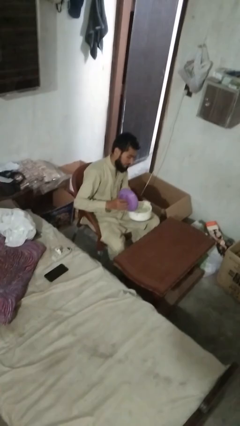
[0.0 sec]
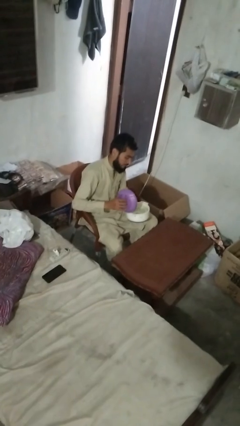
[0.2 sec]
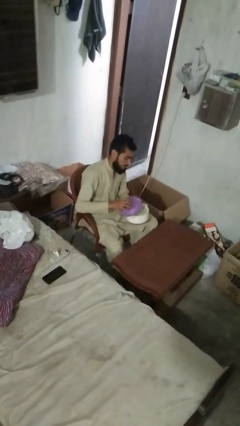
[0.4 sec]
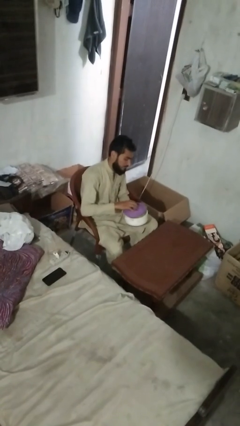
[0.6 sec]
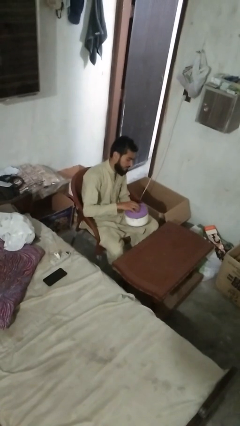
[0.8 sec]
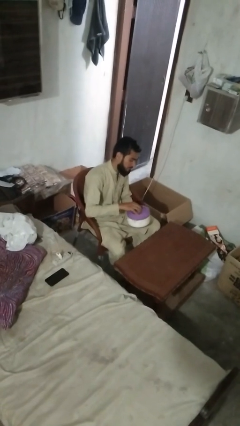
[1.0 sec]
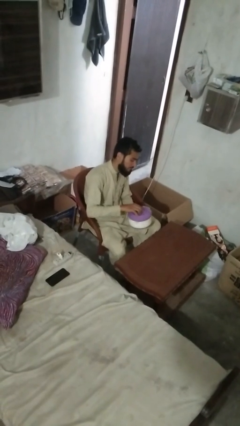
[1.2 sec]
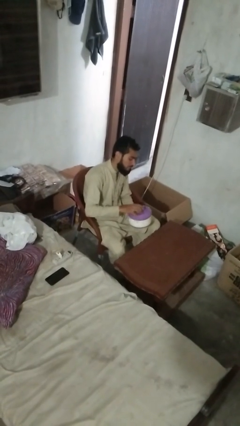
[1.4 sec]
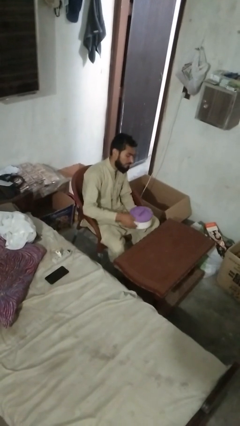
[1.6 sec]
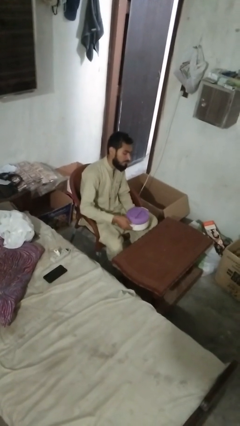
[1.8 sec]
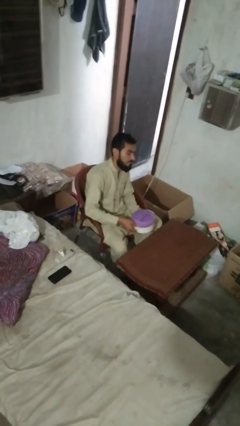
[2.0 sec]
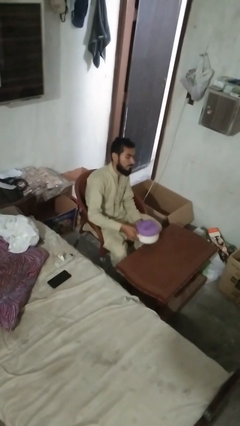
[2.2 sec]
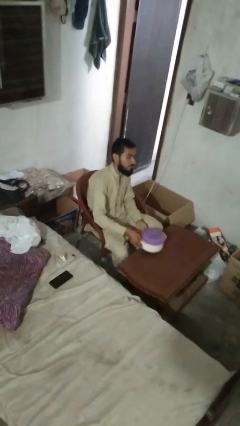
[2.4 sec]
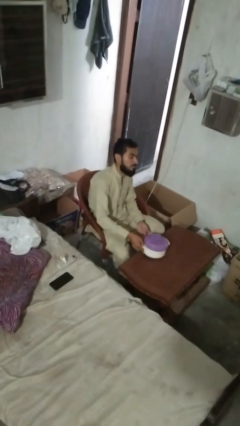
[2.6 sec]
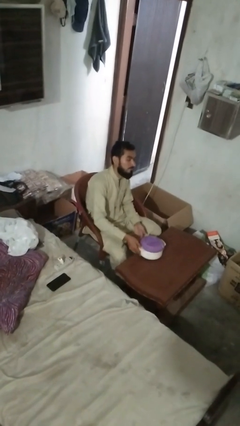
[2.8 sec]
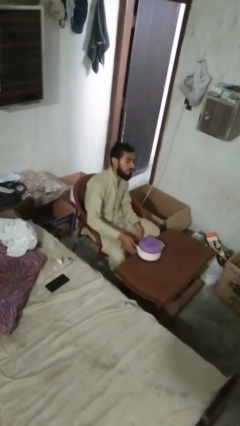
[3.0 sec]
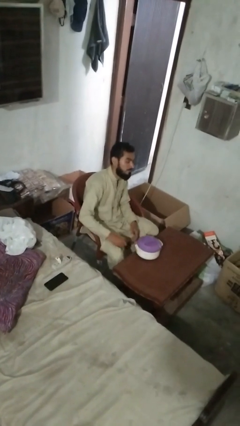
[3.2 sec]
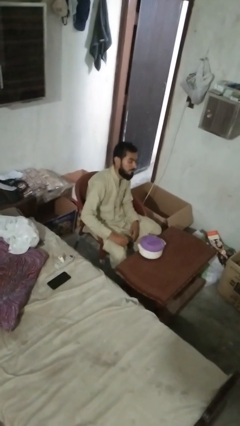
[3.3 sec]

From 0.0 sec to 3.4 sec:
person takes off apron

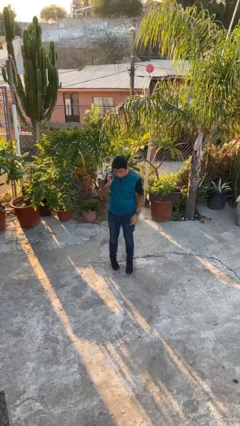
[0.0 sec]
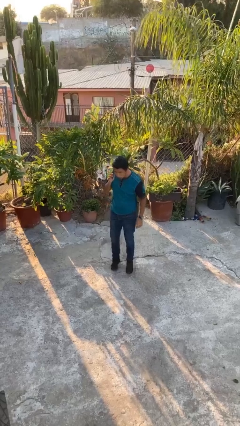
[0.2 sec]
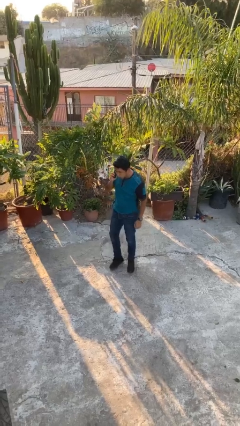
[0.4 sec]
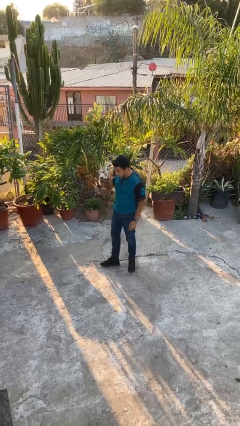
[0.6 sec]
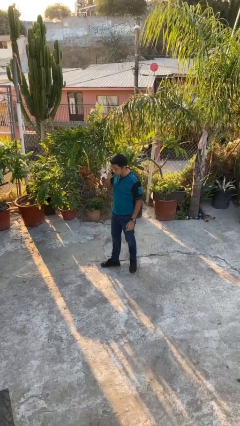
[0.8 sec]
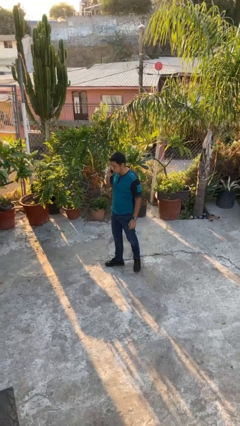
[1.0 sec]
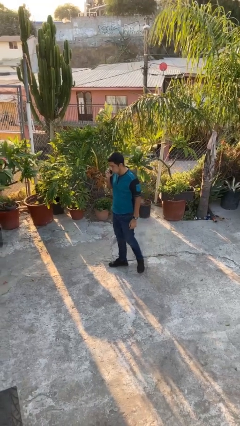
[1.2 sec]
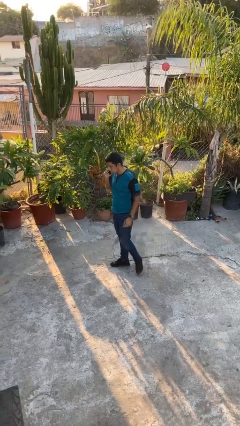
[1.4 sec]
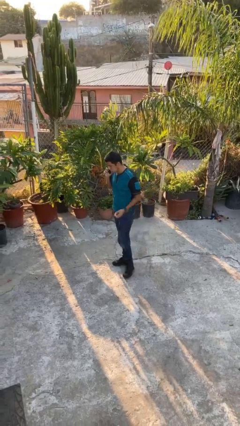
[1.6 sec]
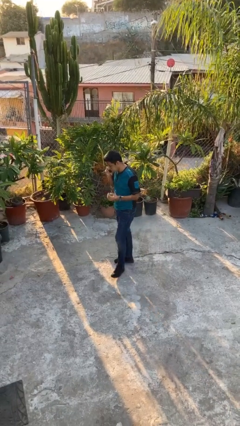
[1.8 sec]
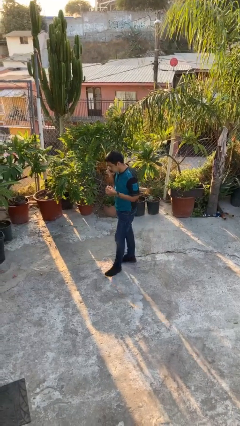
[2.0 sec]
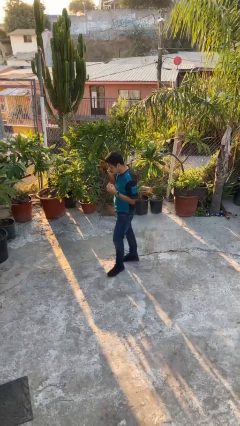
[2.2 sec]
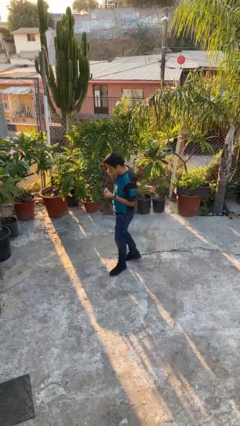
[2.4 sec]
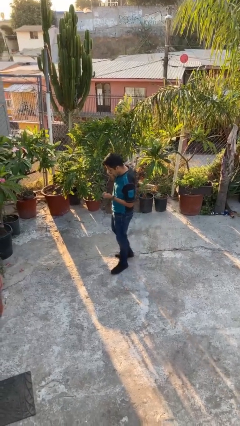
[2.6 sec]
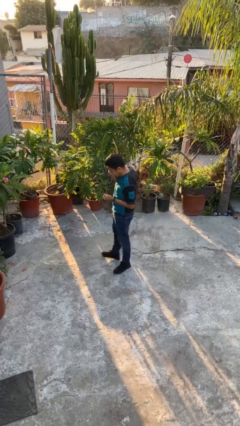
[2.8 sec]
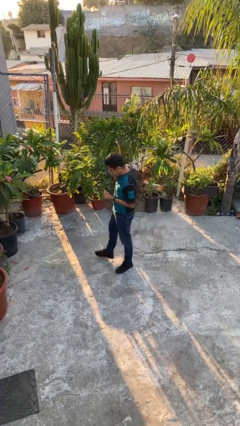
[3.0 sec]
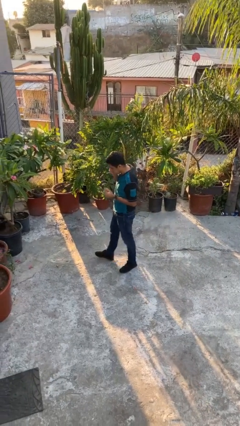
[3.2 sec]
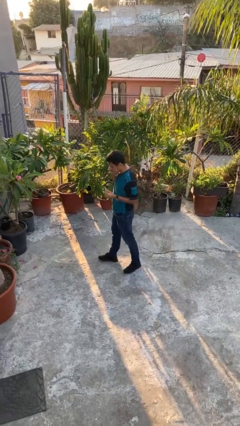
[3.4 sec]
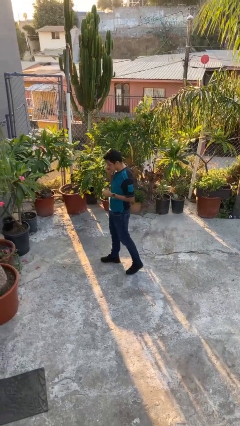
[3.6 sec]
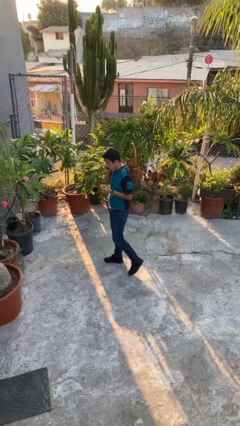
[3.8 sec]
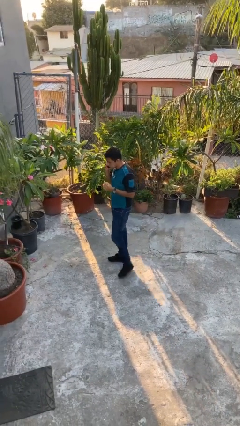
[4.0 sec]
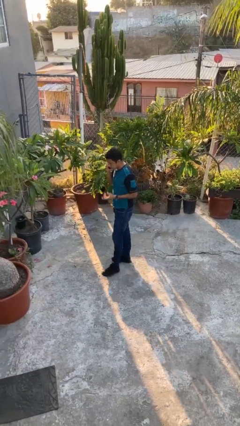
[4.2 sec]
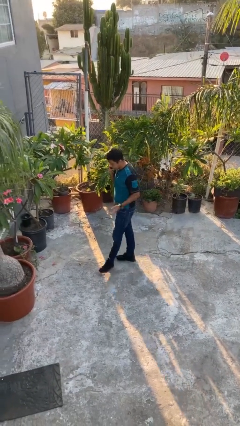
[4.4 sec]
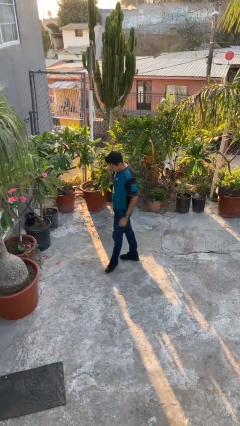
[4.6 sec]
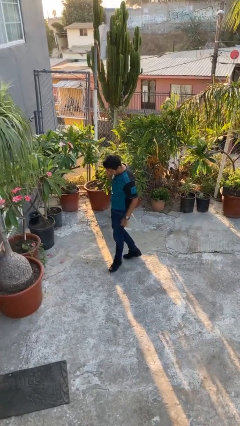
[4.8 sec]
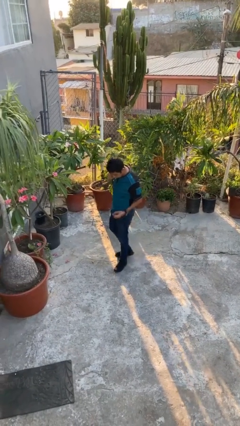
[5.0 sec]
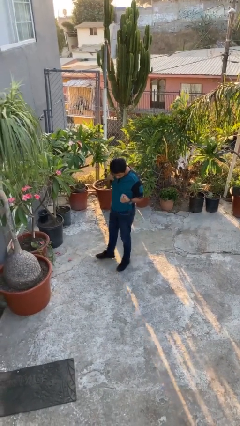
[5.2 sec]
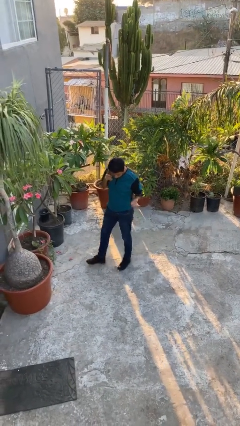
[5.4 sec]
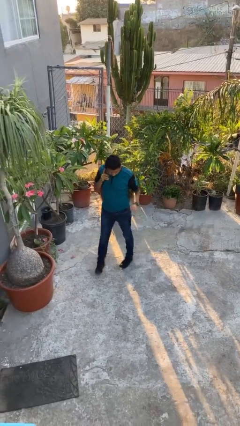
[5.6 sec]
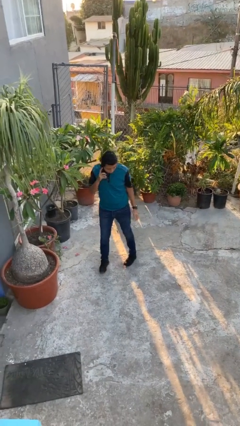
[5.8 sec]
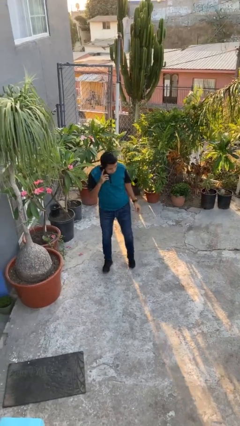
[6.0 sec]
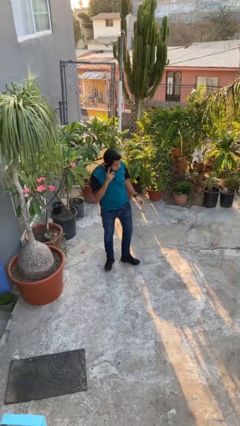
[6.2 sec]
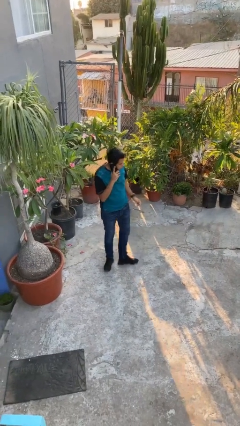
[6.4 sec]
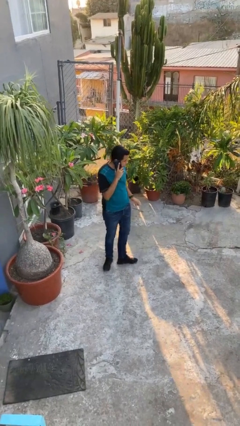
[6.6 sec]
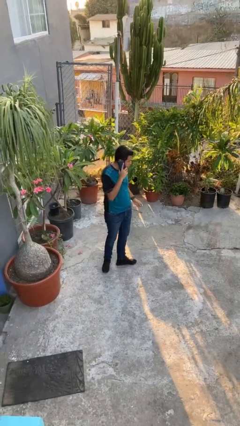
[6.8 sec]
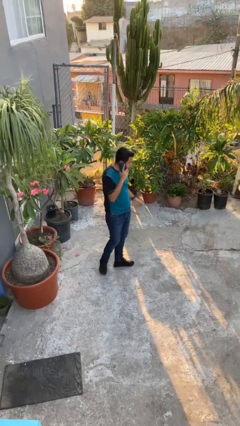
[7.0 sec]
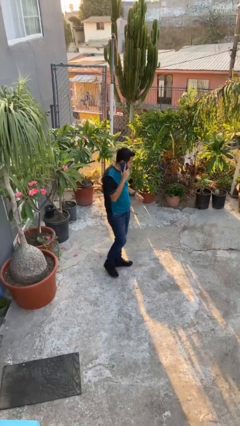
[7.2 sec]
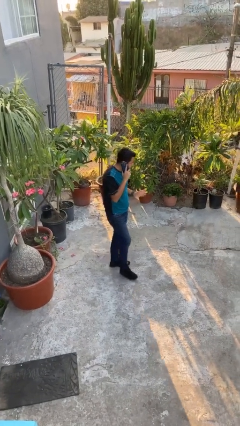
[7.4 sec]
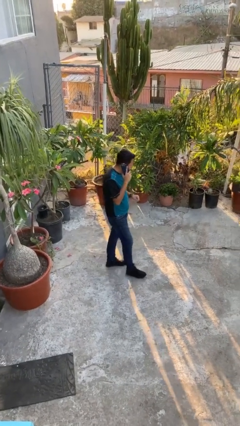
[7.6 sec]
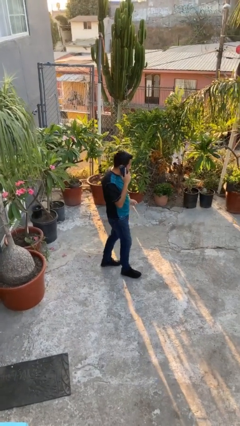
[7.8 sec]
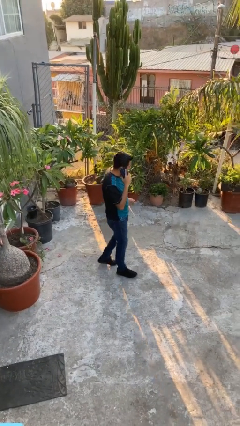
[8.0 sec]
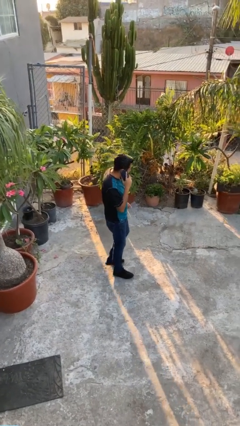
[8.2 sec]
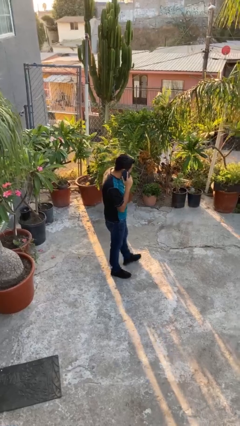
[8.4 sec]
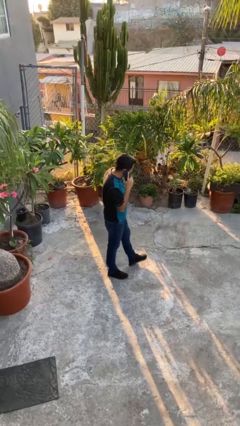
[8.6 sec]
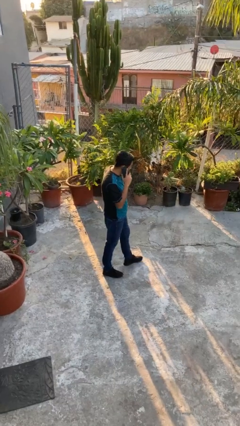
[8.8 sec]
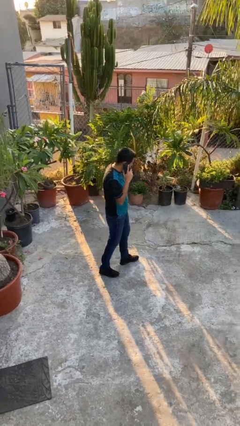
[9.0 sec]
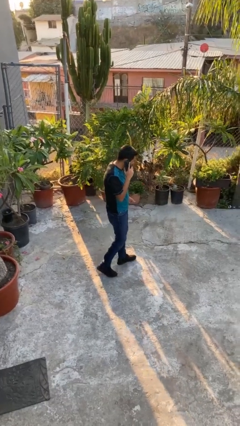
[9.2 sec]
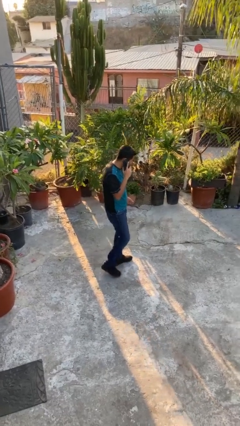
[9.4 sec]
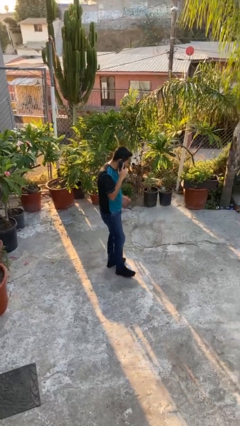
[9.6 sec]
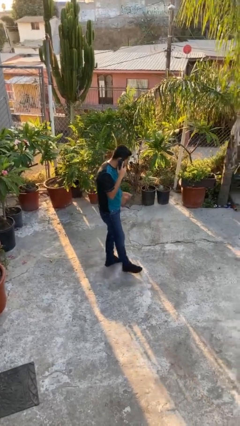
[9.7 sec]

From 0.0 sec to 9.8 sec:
person talks on phone

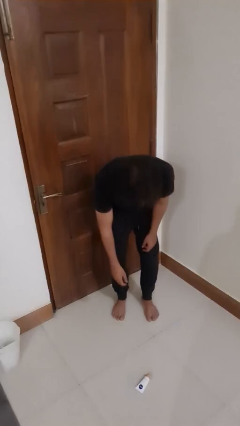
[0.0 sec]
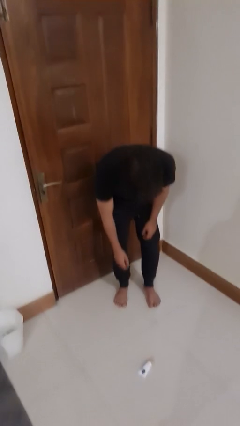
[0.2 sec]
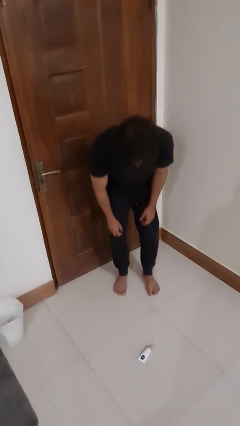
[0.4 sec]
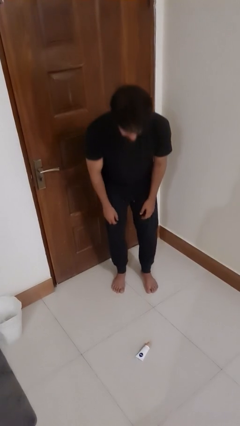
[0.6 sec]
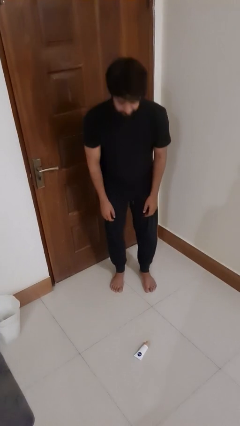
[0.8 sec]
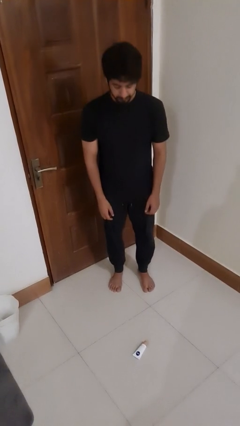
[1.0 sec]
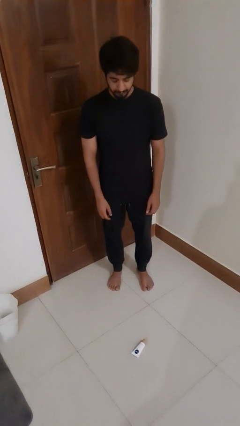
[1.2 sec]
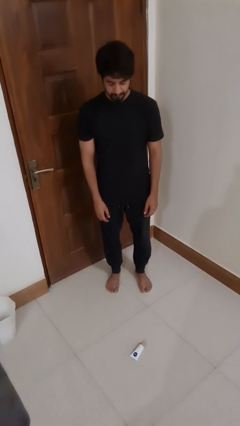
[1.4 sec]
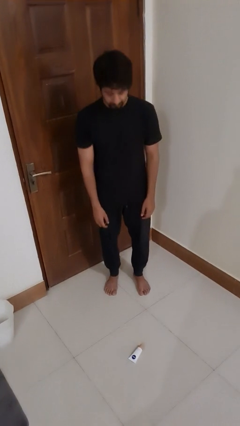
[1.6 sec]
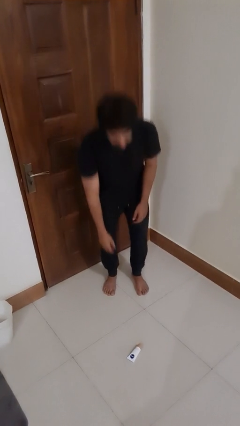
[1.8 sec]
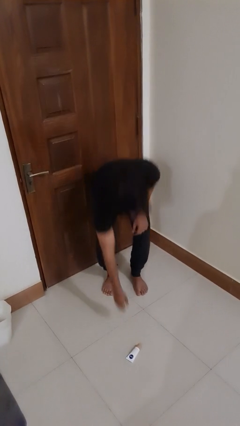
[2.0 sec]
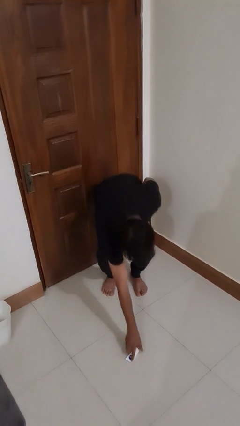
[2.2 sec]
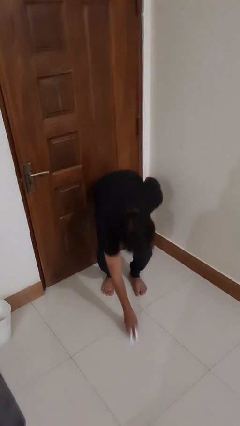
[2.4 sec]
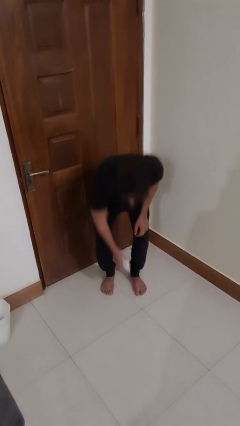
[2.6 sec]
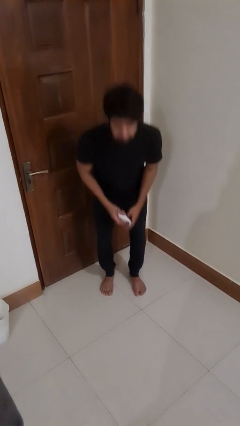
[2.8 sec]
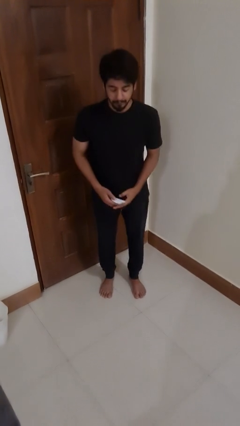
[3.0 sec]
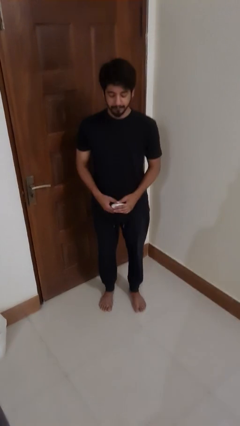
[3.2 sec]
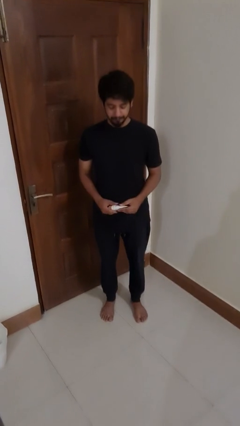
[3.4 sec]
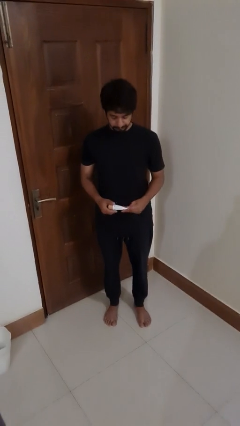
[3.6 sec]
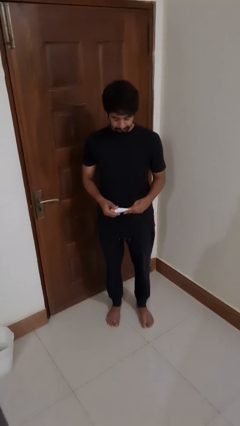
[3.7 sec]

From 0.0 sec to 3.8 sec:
person picks up object from floor

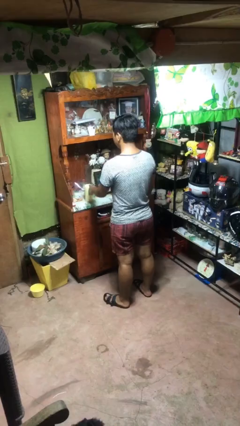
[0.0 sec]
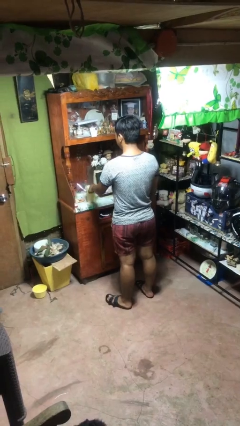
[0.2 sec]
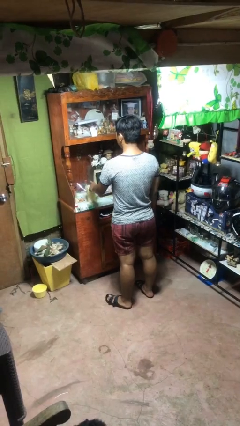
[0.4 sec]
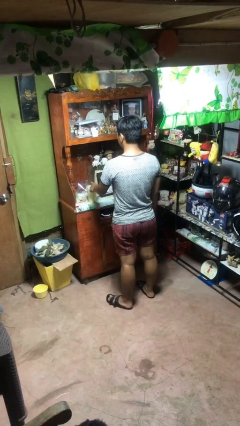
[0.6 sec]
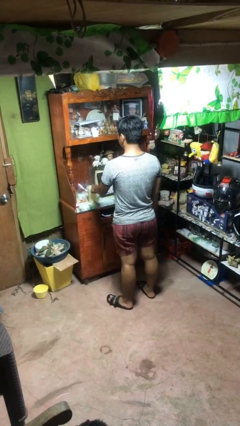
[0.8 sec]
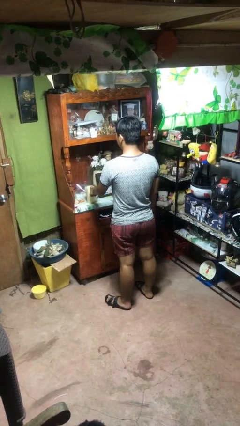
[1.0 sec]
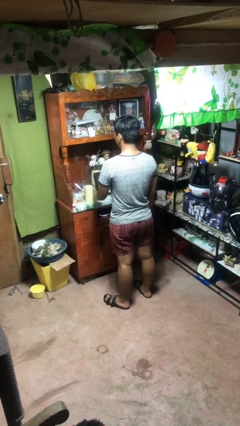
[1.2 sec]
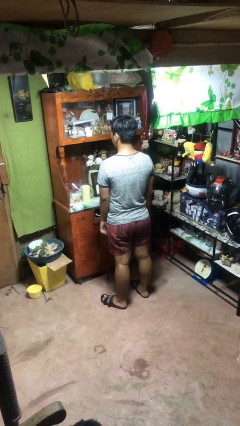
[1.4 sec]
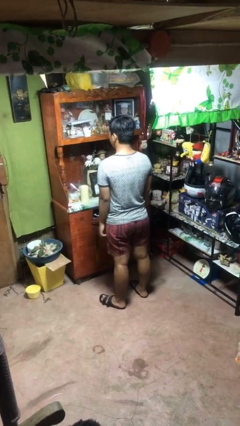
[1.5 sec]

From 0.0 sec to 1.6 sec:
person taps object with finger
